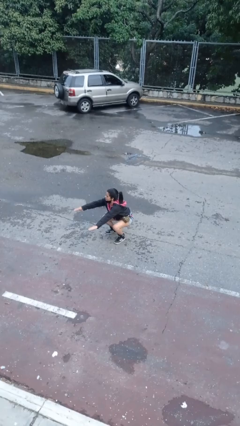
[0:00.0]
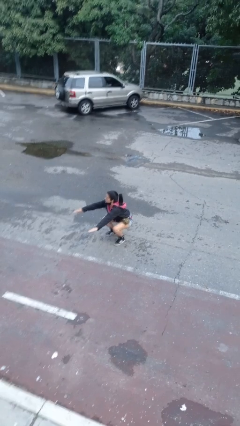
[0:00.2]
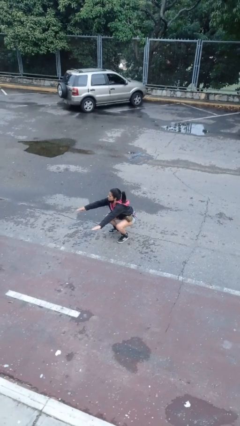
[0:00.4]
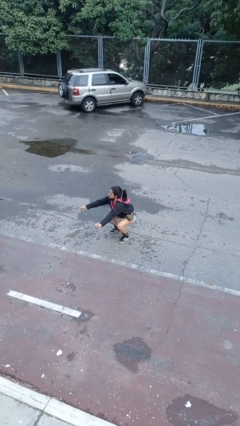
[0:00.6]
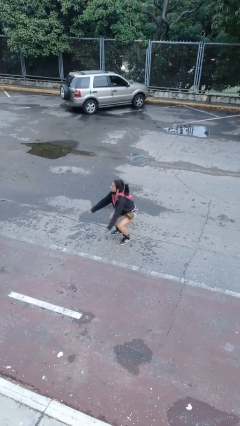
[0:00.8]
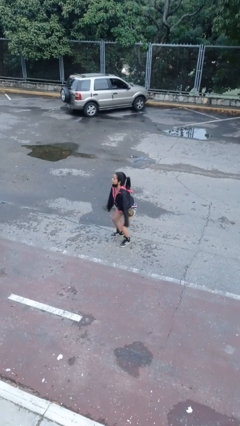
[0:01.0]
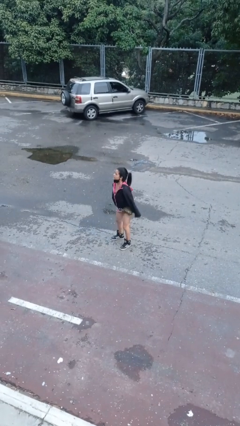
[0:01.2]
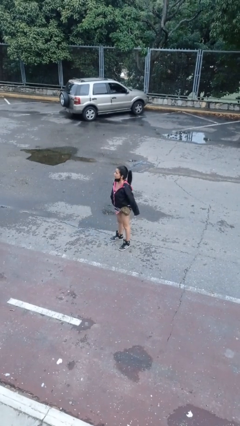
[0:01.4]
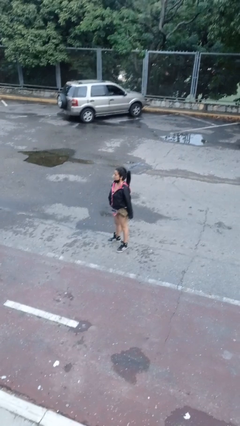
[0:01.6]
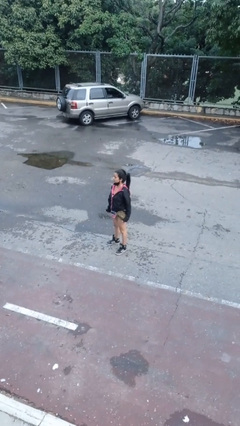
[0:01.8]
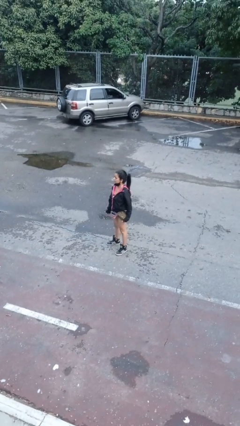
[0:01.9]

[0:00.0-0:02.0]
person stands up

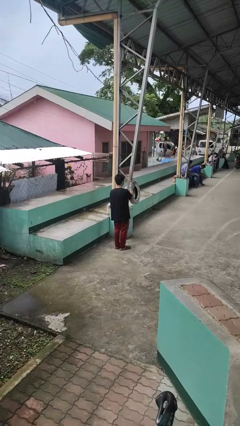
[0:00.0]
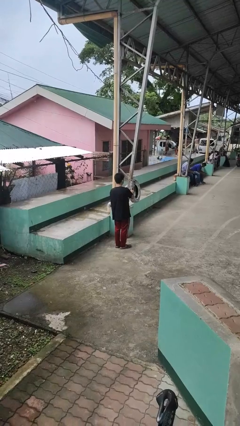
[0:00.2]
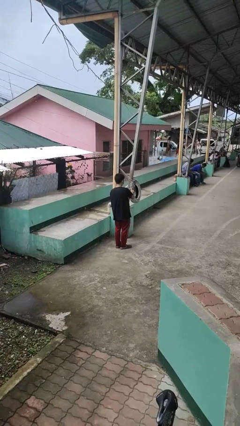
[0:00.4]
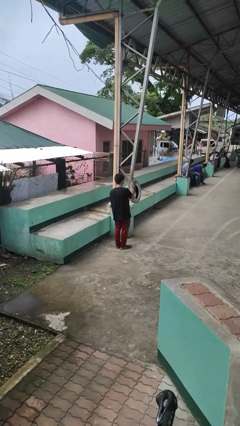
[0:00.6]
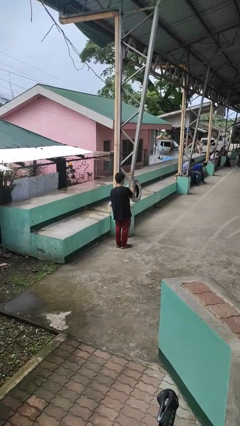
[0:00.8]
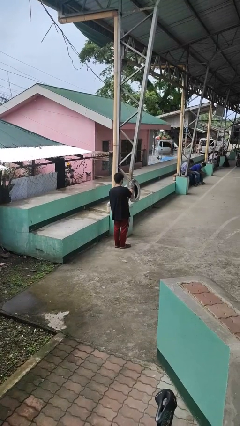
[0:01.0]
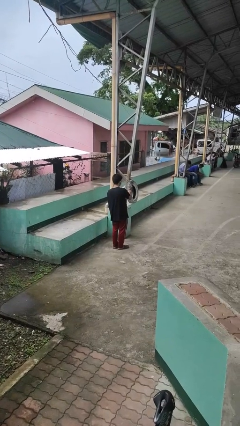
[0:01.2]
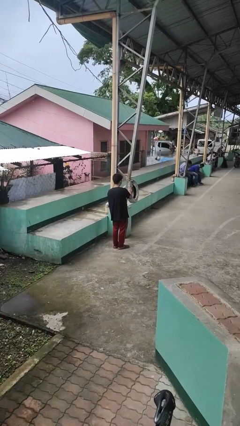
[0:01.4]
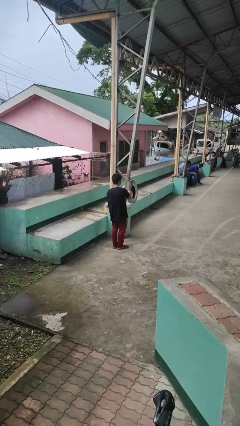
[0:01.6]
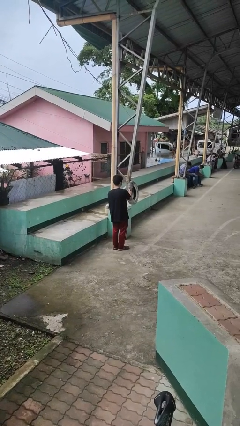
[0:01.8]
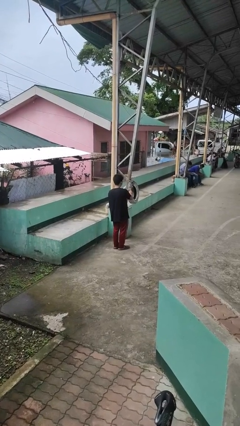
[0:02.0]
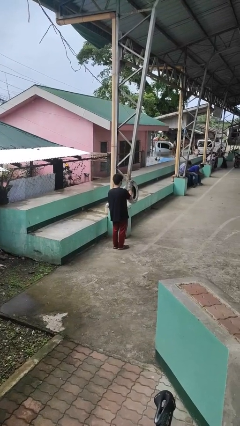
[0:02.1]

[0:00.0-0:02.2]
person taps object with finger

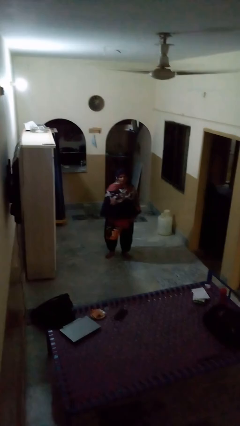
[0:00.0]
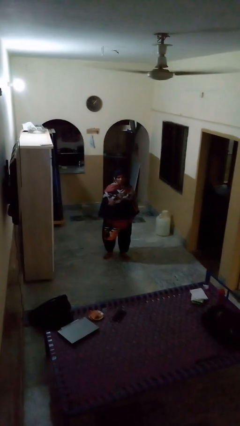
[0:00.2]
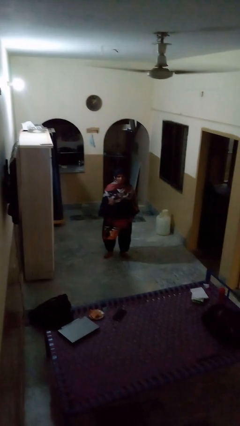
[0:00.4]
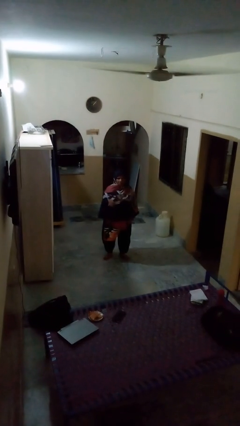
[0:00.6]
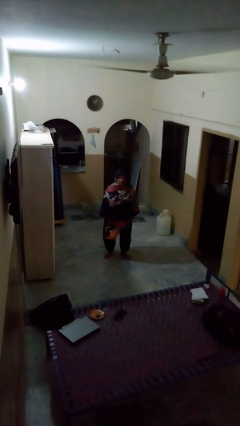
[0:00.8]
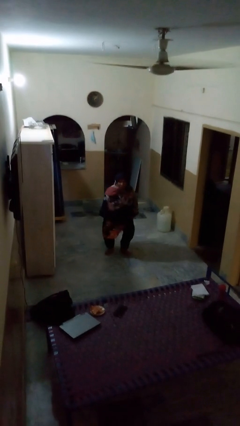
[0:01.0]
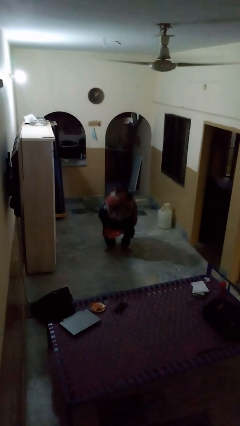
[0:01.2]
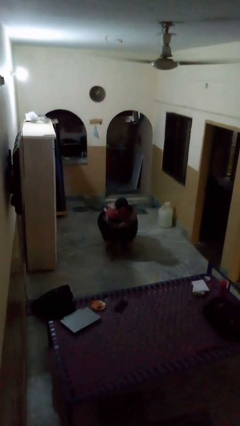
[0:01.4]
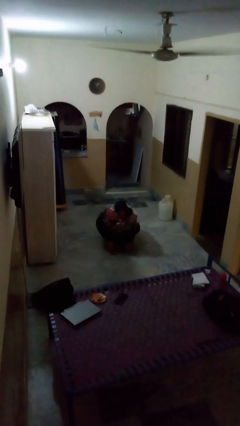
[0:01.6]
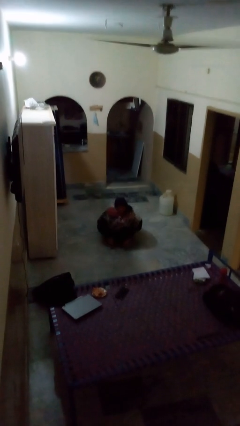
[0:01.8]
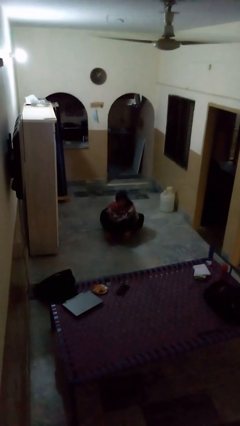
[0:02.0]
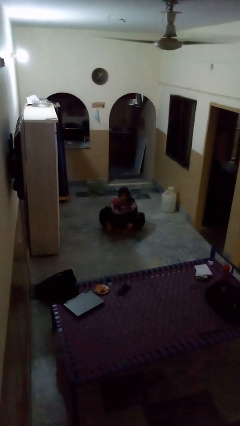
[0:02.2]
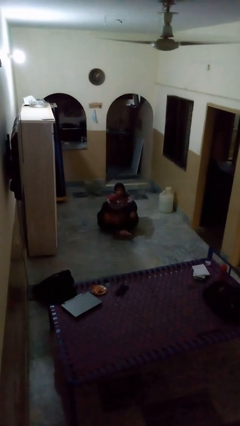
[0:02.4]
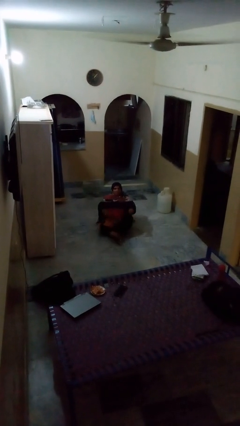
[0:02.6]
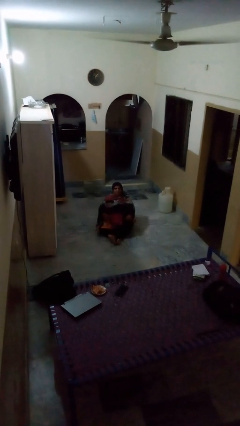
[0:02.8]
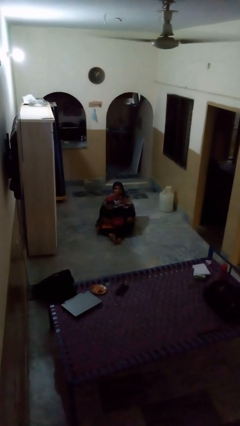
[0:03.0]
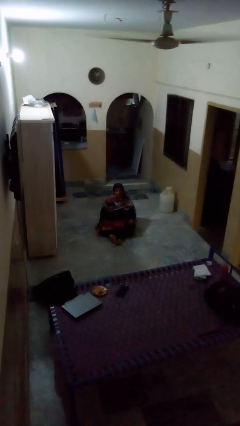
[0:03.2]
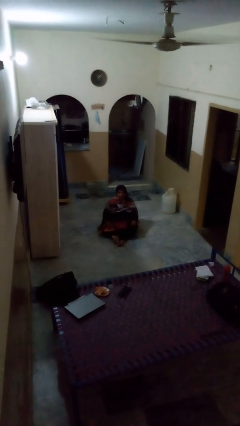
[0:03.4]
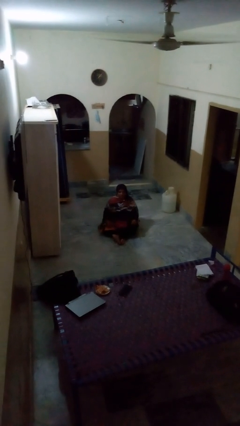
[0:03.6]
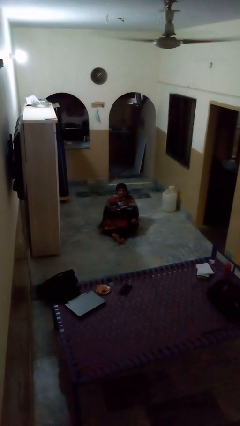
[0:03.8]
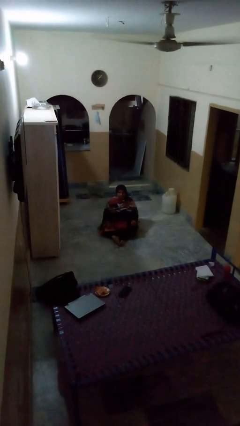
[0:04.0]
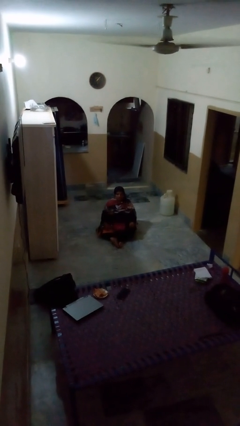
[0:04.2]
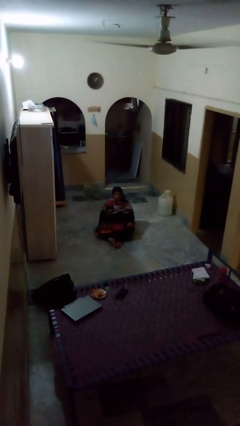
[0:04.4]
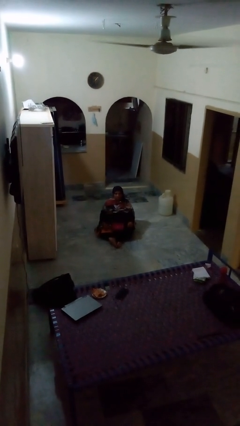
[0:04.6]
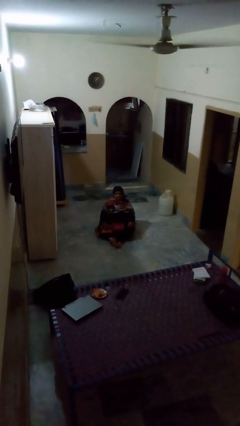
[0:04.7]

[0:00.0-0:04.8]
person sits crisscross

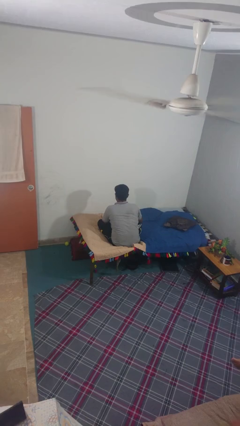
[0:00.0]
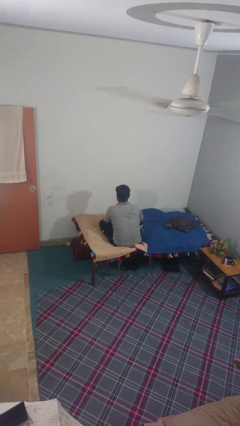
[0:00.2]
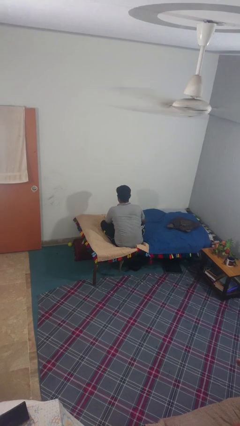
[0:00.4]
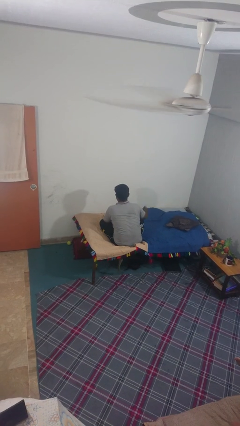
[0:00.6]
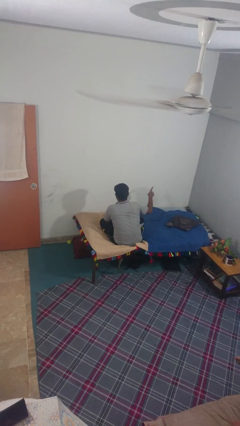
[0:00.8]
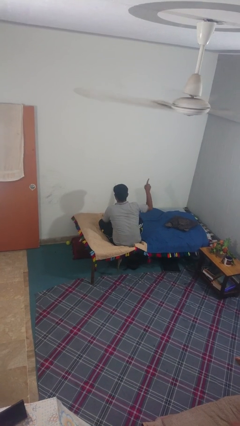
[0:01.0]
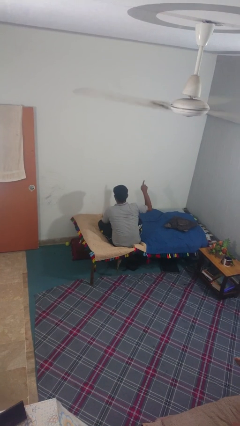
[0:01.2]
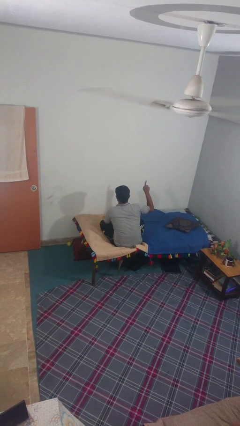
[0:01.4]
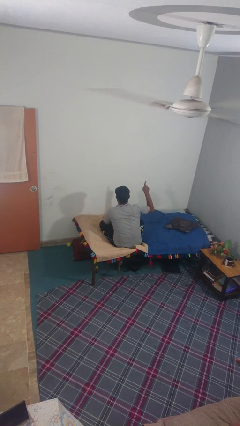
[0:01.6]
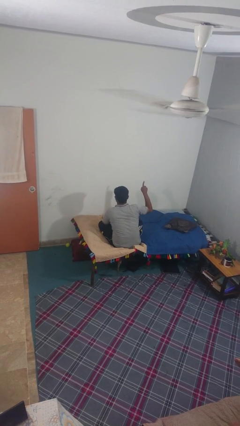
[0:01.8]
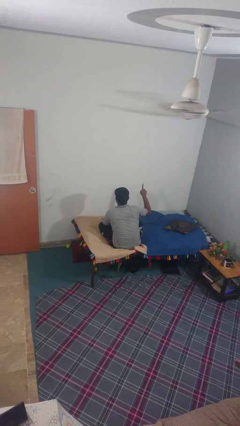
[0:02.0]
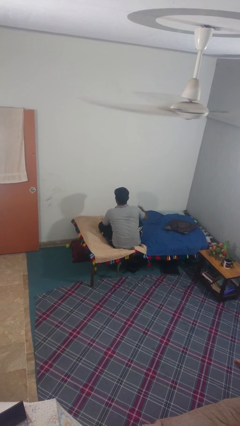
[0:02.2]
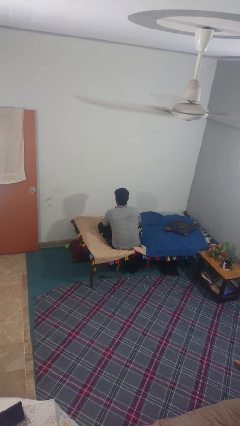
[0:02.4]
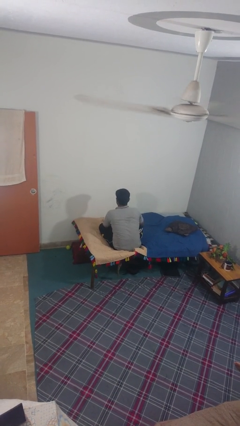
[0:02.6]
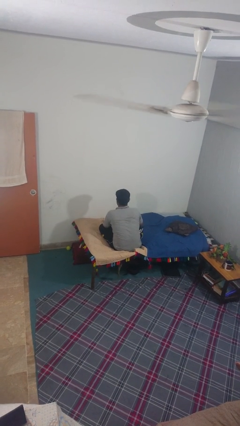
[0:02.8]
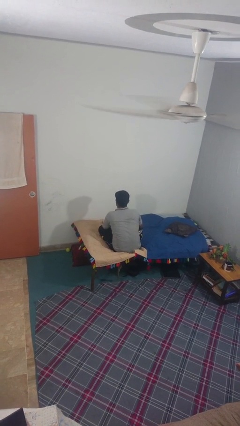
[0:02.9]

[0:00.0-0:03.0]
person gestures number one

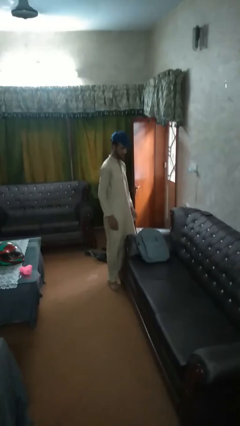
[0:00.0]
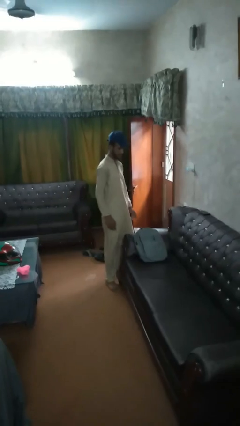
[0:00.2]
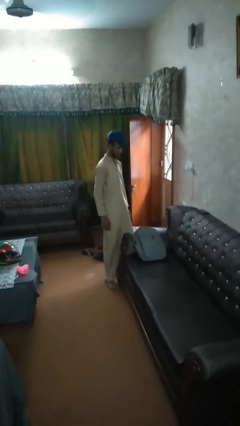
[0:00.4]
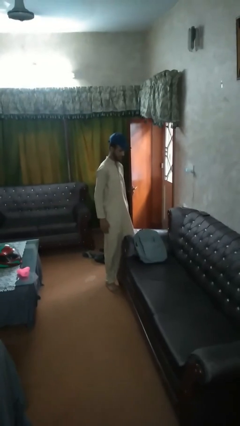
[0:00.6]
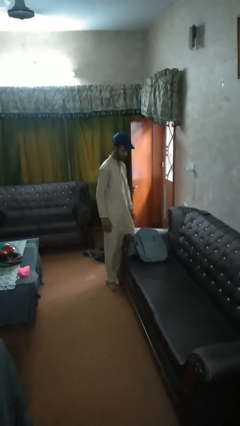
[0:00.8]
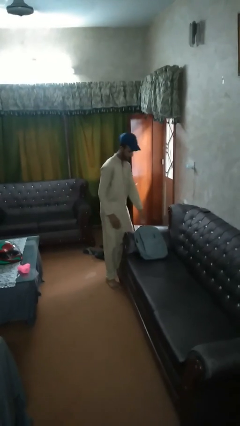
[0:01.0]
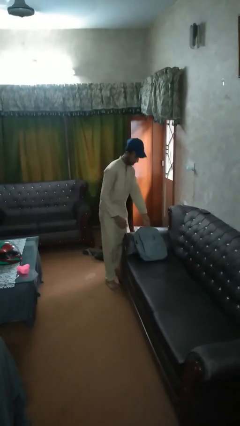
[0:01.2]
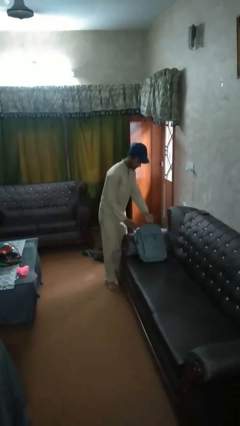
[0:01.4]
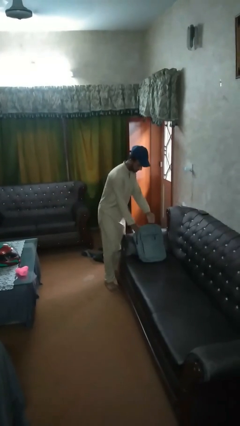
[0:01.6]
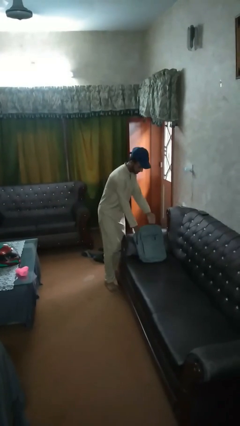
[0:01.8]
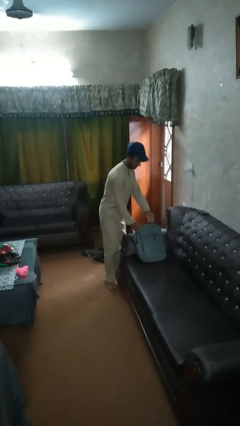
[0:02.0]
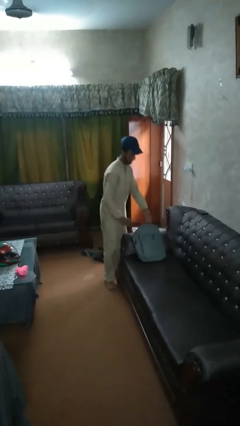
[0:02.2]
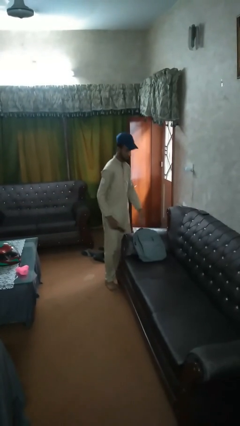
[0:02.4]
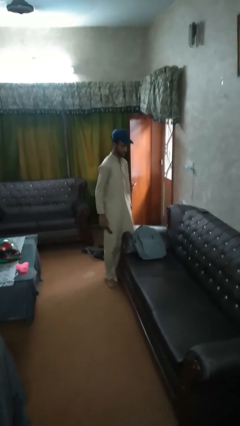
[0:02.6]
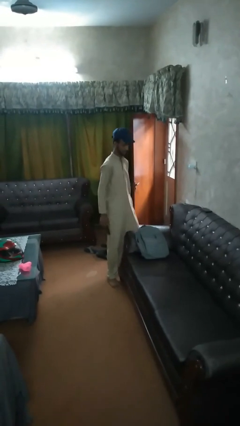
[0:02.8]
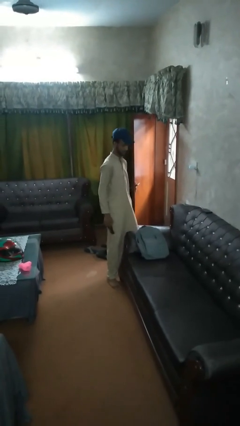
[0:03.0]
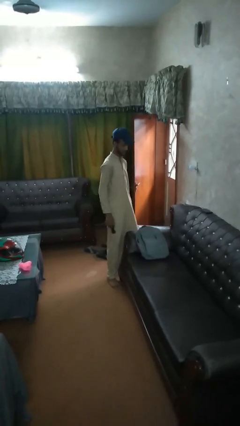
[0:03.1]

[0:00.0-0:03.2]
person takes object from bag

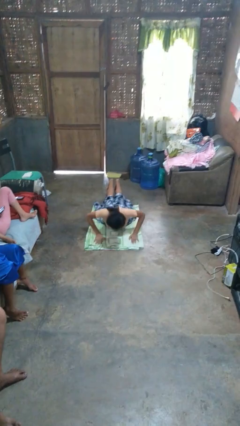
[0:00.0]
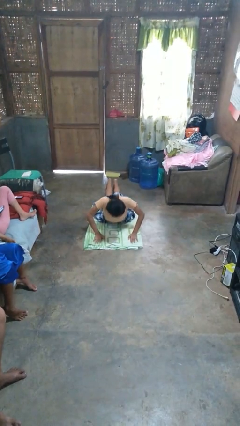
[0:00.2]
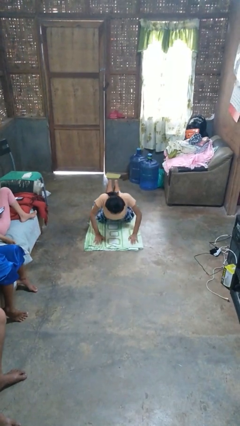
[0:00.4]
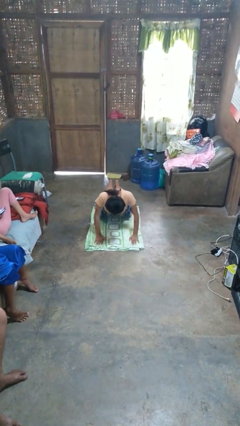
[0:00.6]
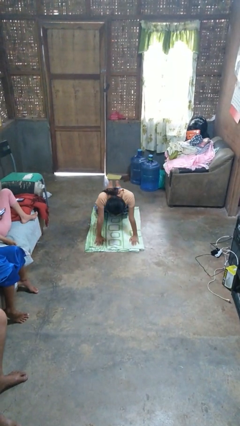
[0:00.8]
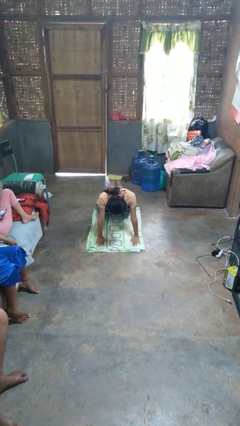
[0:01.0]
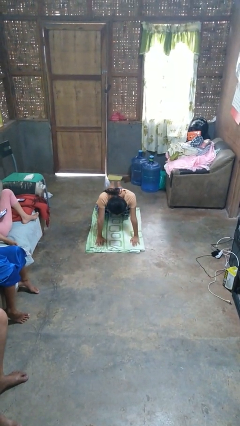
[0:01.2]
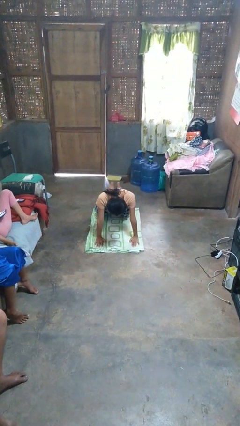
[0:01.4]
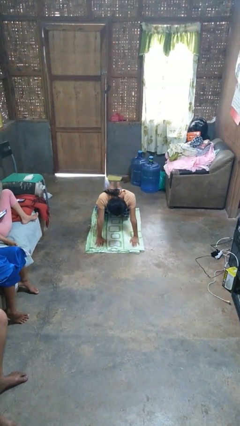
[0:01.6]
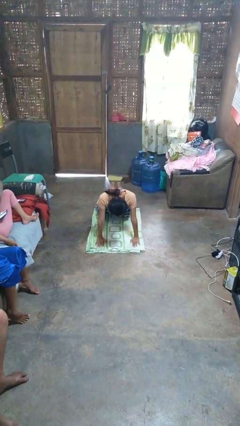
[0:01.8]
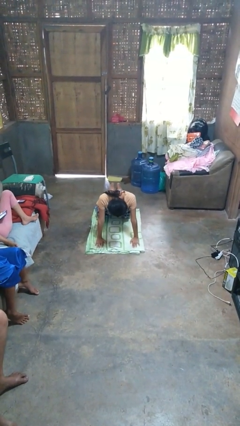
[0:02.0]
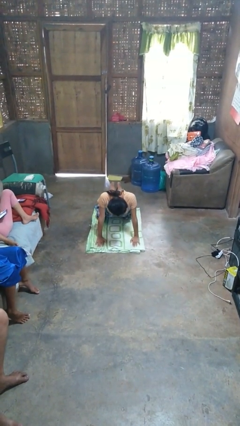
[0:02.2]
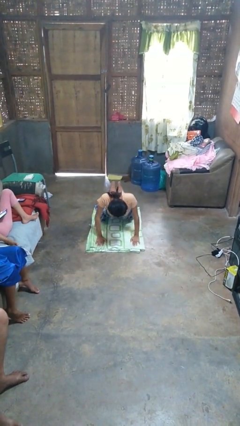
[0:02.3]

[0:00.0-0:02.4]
person exercises with pushup
